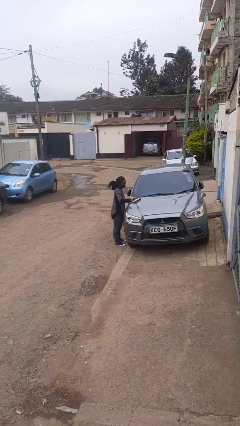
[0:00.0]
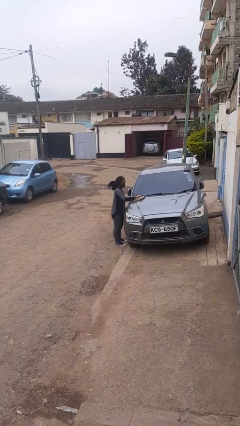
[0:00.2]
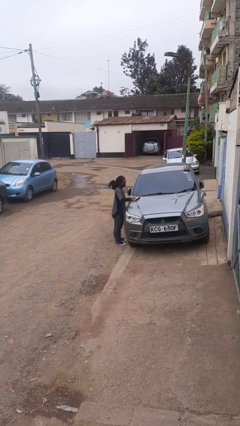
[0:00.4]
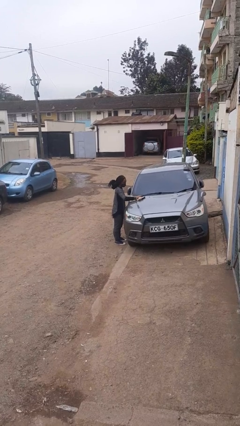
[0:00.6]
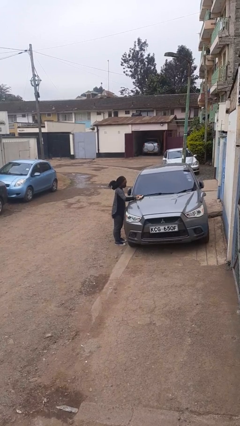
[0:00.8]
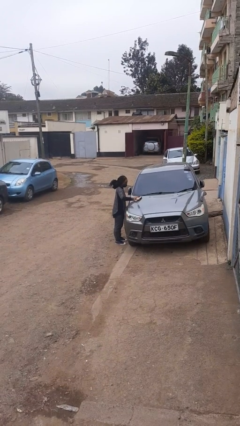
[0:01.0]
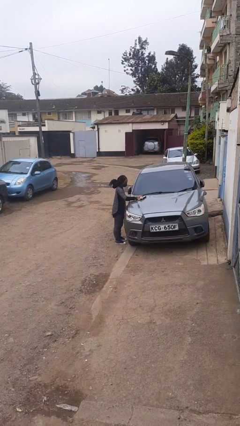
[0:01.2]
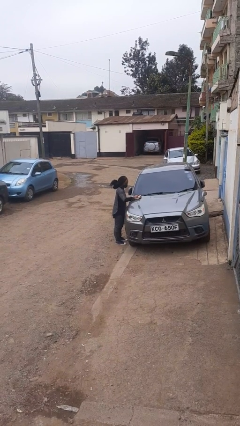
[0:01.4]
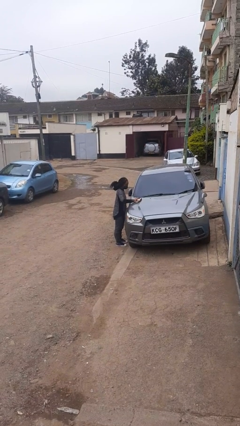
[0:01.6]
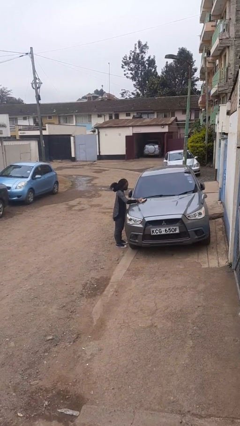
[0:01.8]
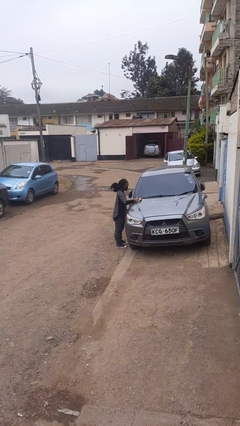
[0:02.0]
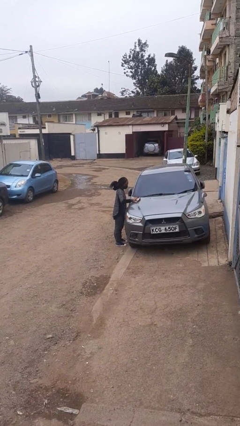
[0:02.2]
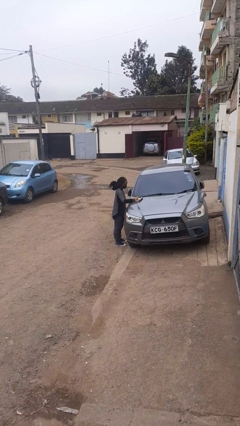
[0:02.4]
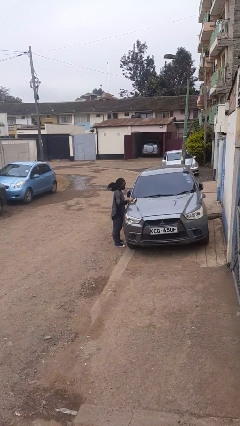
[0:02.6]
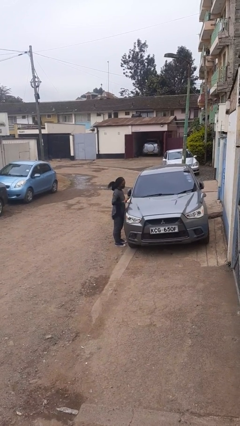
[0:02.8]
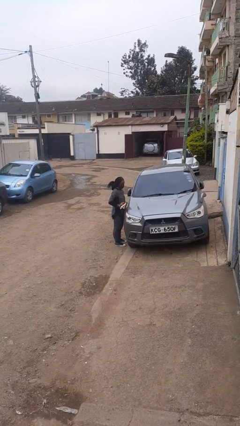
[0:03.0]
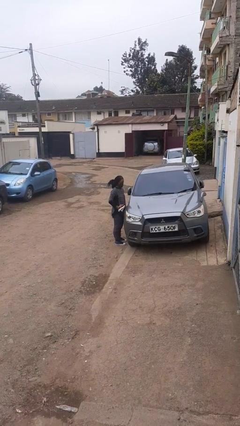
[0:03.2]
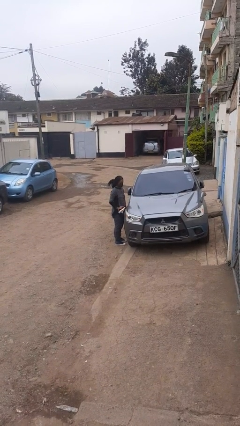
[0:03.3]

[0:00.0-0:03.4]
person polishes car with rag

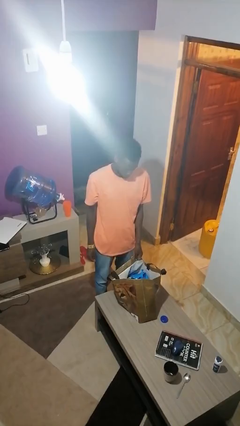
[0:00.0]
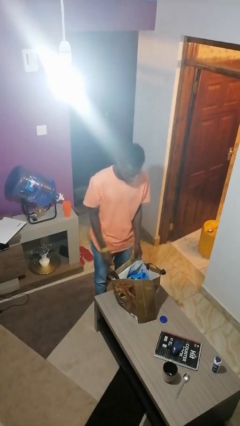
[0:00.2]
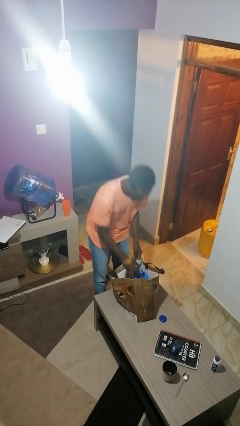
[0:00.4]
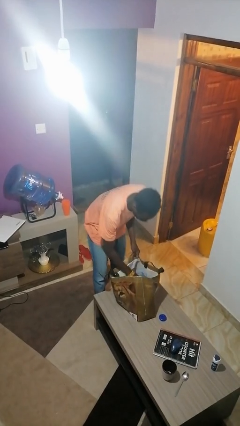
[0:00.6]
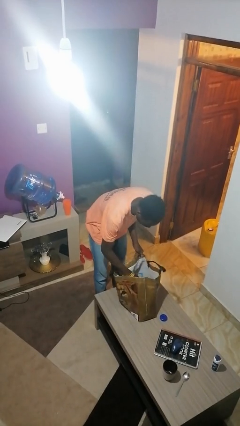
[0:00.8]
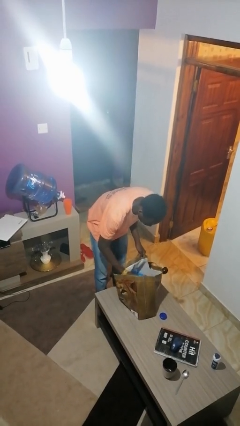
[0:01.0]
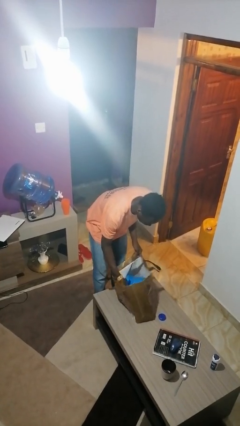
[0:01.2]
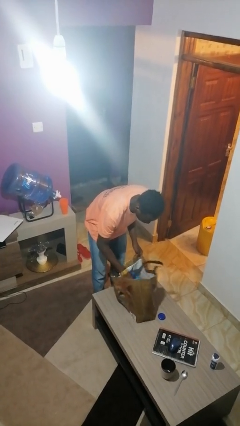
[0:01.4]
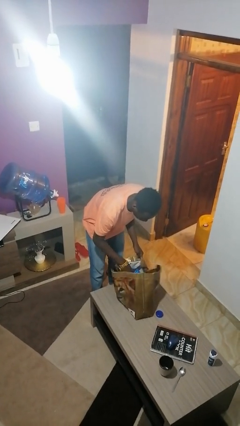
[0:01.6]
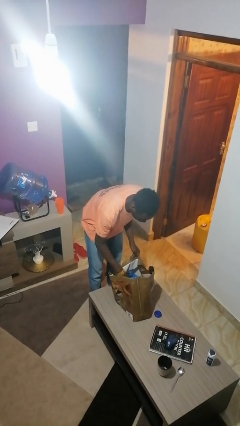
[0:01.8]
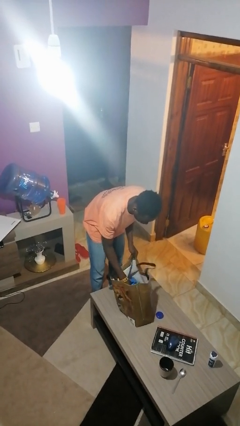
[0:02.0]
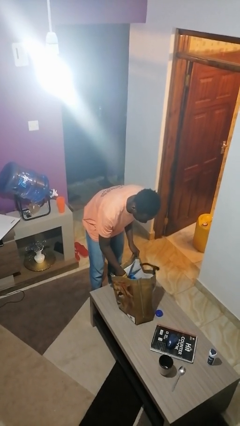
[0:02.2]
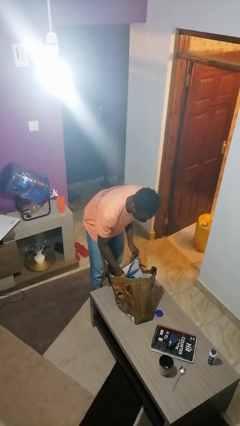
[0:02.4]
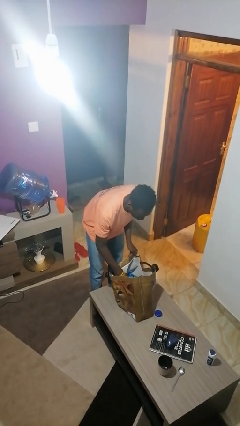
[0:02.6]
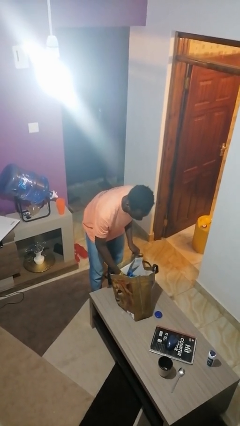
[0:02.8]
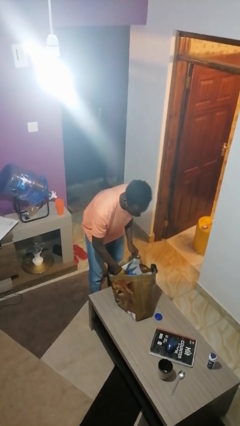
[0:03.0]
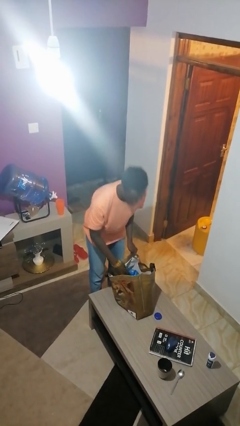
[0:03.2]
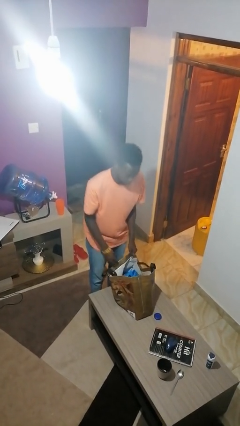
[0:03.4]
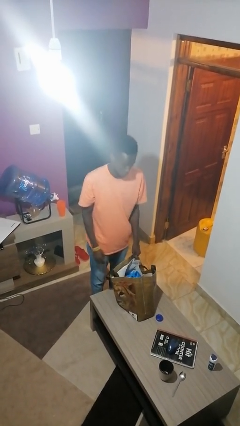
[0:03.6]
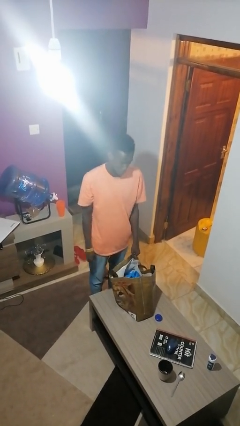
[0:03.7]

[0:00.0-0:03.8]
person searches in bag

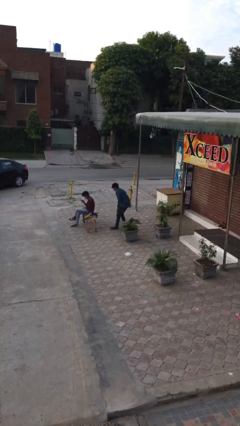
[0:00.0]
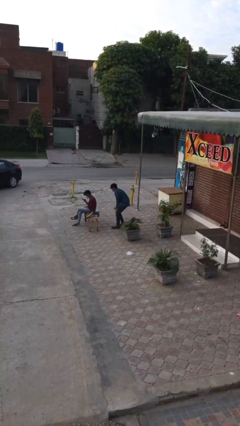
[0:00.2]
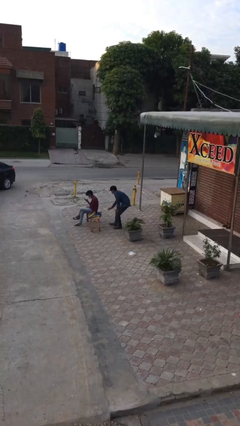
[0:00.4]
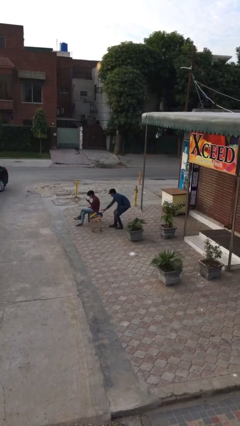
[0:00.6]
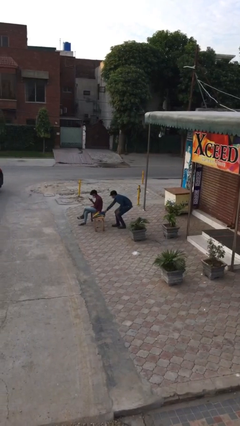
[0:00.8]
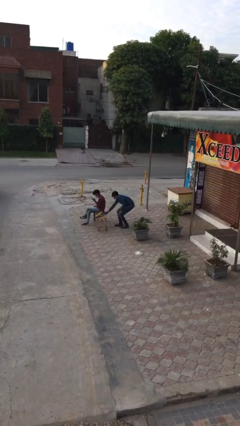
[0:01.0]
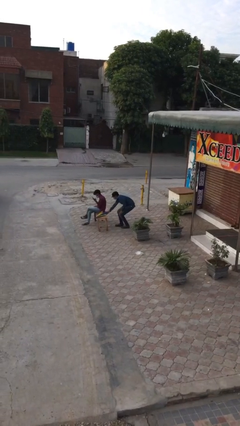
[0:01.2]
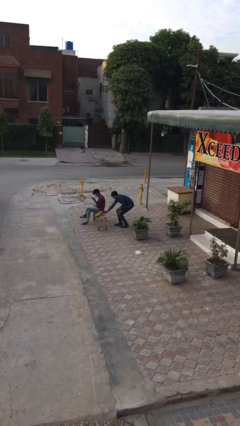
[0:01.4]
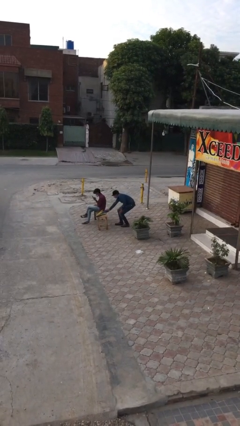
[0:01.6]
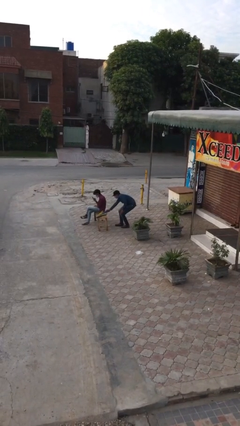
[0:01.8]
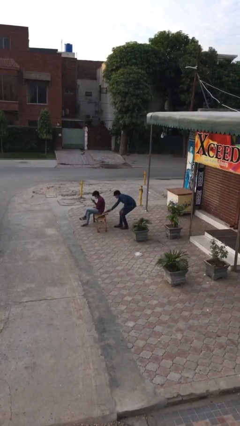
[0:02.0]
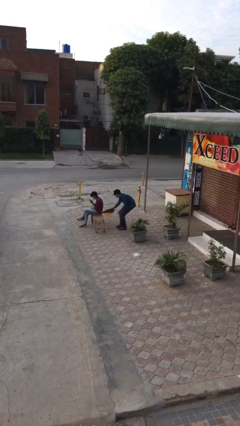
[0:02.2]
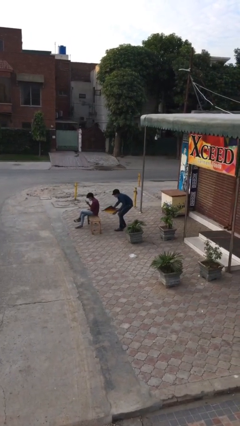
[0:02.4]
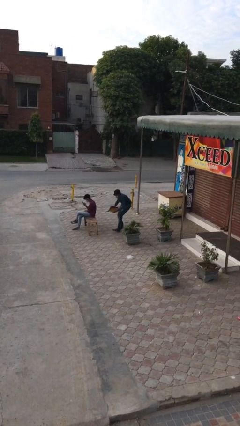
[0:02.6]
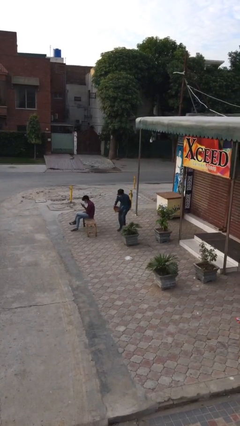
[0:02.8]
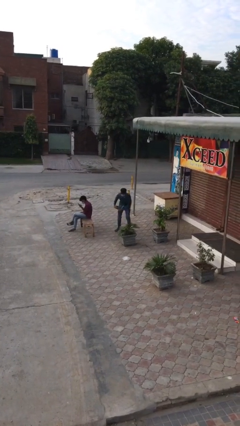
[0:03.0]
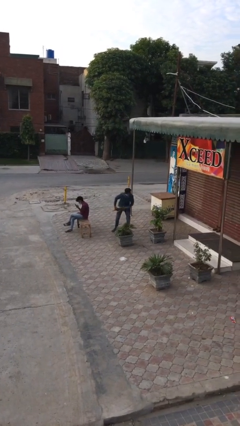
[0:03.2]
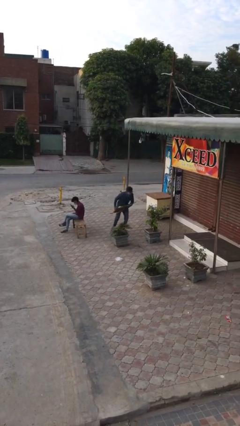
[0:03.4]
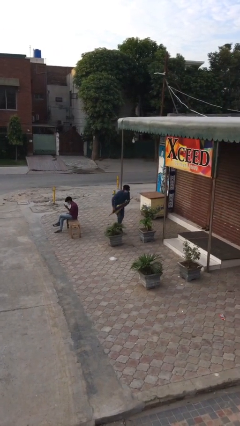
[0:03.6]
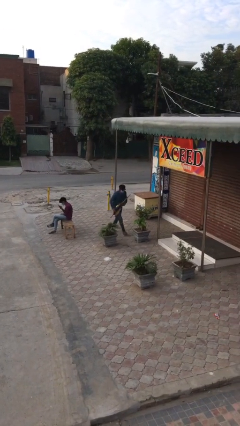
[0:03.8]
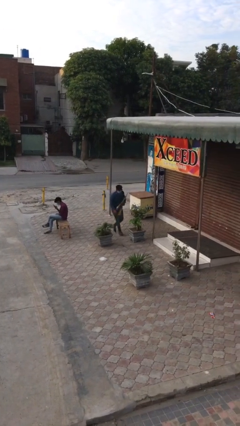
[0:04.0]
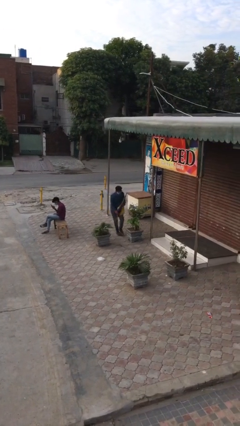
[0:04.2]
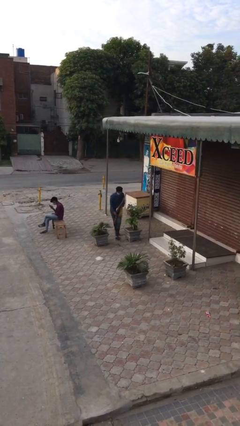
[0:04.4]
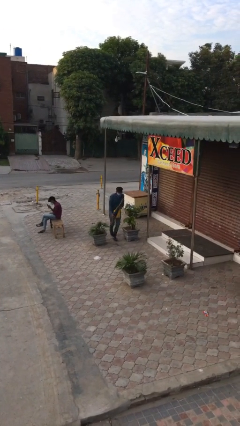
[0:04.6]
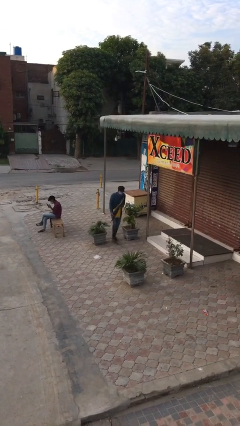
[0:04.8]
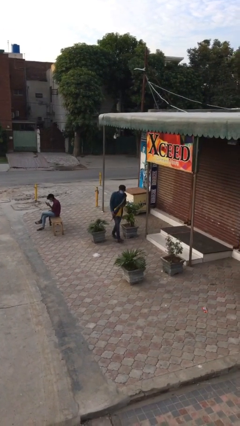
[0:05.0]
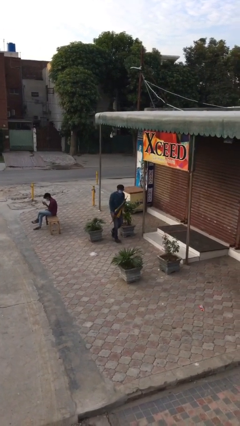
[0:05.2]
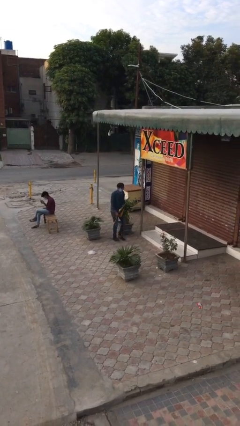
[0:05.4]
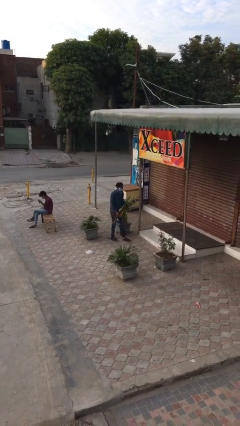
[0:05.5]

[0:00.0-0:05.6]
person steals object from person

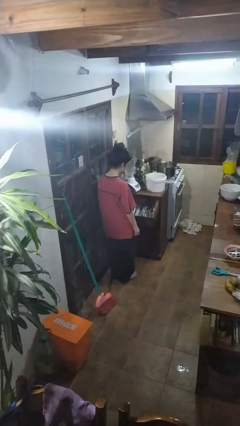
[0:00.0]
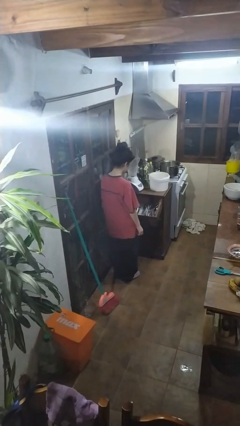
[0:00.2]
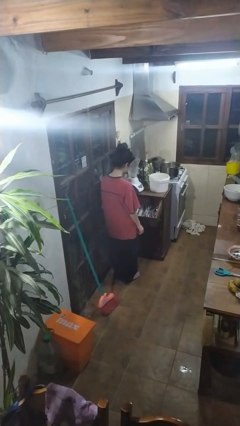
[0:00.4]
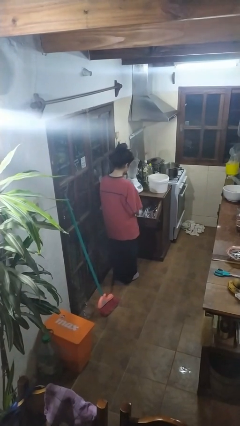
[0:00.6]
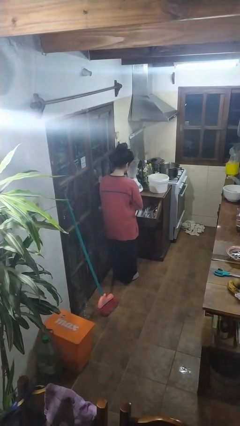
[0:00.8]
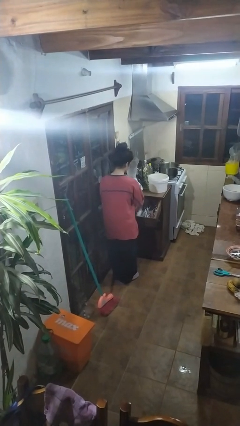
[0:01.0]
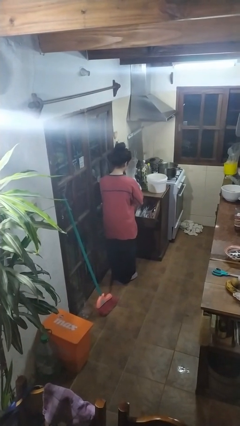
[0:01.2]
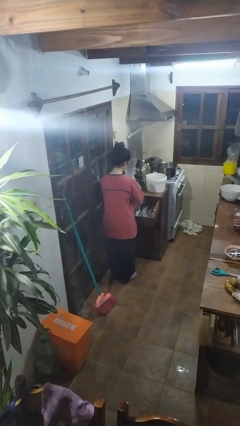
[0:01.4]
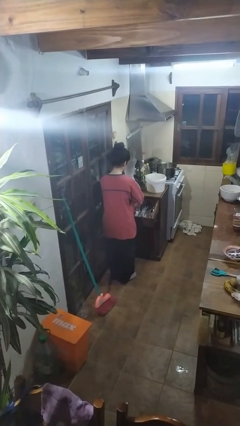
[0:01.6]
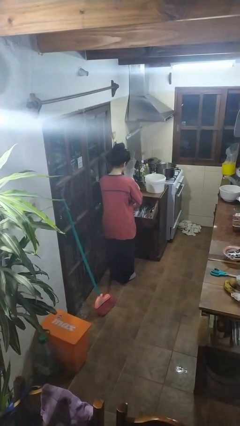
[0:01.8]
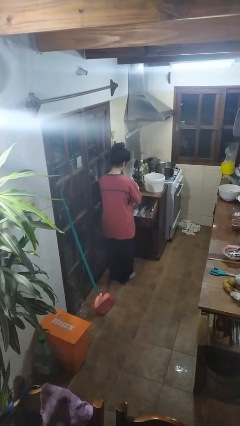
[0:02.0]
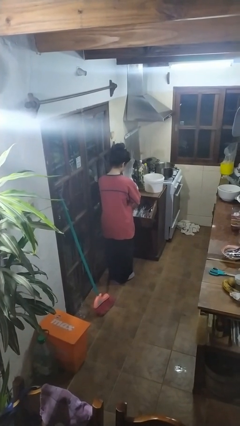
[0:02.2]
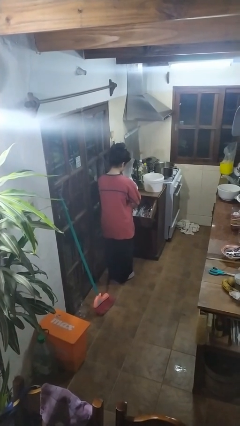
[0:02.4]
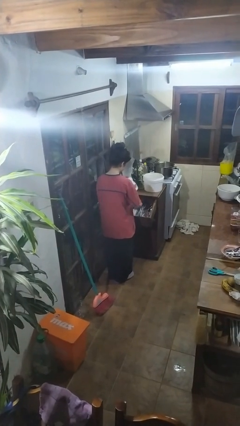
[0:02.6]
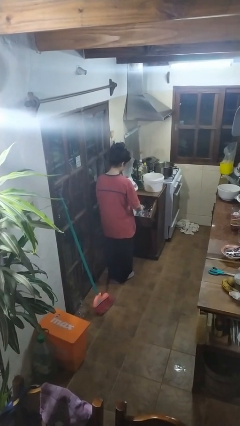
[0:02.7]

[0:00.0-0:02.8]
person searches in kitchen drawer

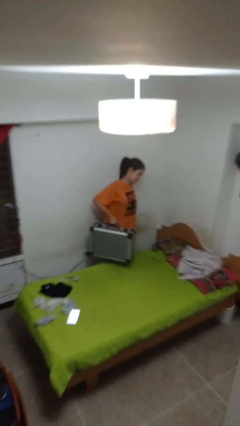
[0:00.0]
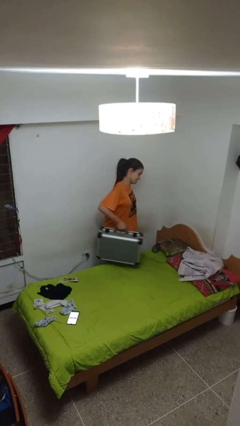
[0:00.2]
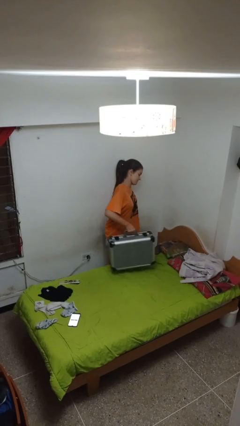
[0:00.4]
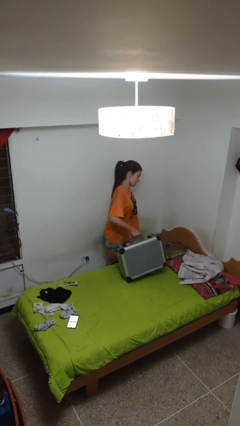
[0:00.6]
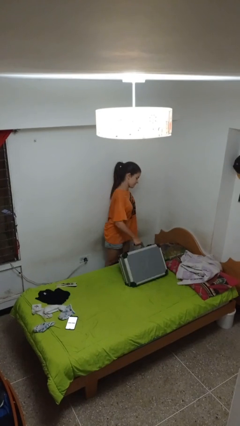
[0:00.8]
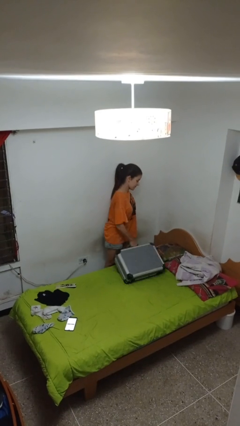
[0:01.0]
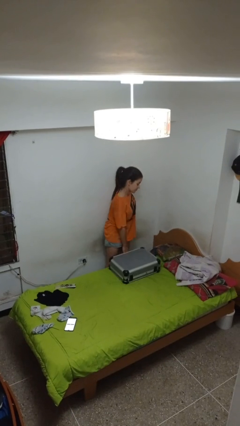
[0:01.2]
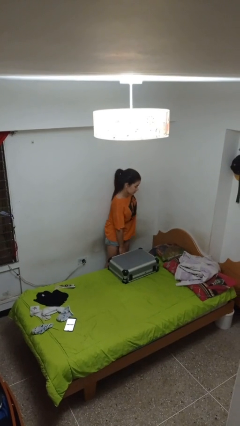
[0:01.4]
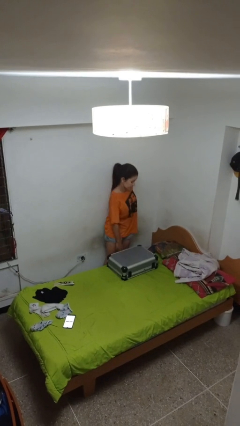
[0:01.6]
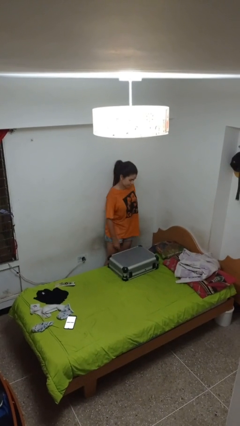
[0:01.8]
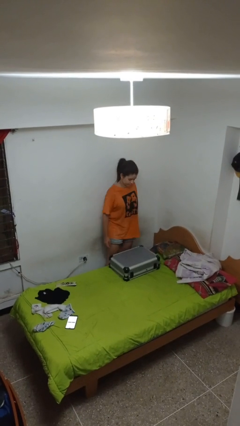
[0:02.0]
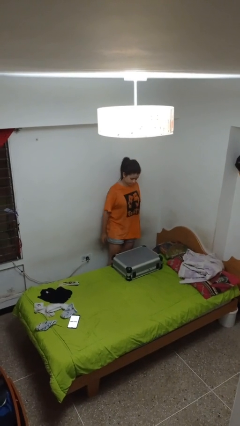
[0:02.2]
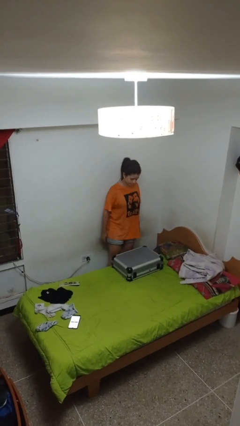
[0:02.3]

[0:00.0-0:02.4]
person puts down object on bed

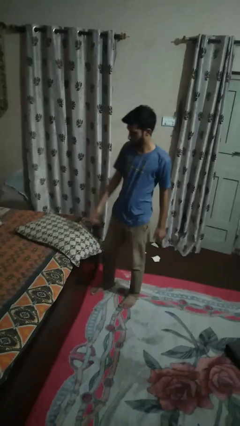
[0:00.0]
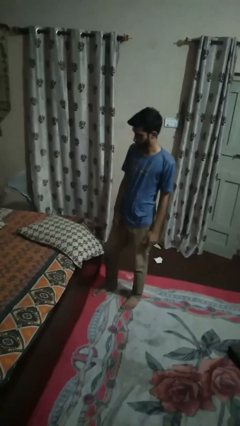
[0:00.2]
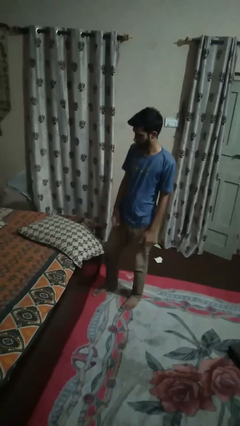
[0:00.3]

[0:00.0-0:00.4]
person picks up object from bed
